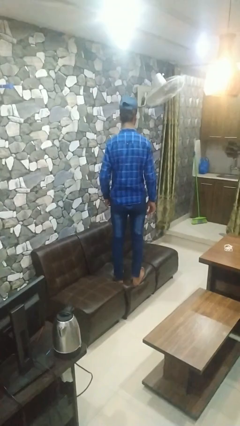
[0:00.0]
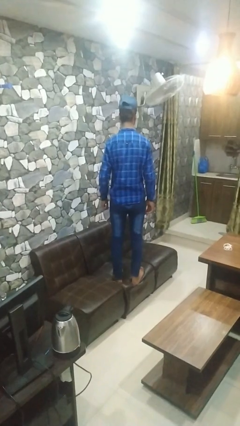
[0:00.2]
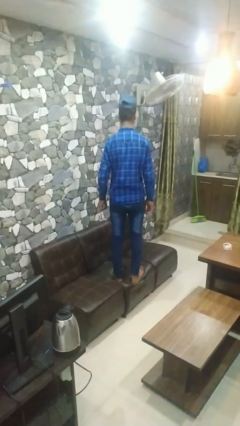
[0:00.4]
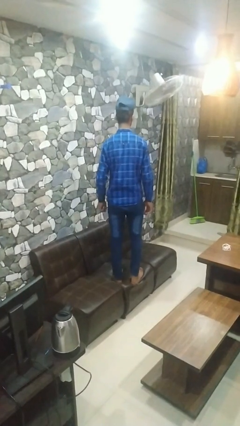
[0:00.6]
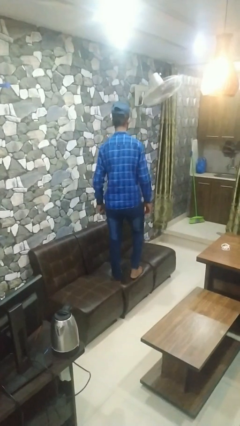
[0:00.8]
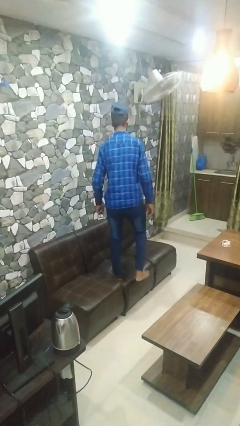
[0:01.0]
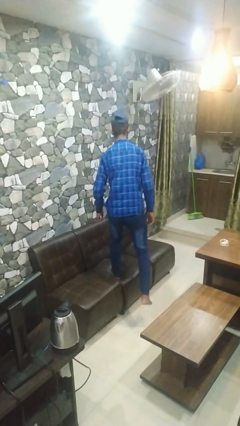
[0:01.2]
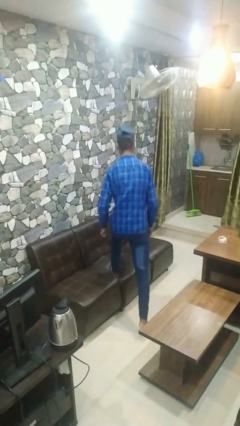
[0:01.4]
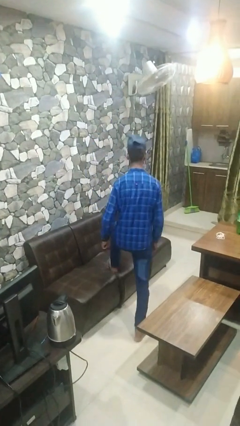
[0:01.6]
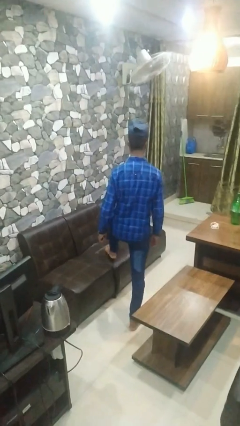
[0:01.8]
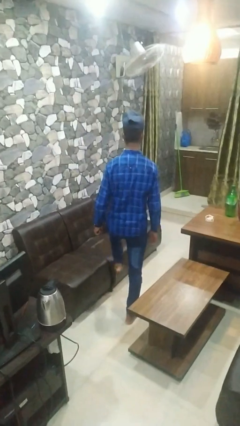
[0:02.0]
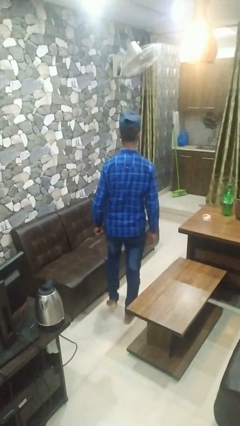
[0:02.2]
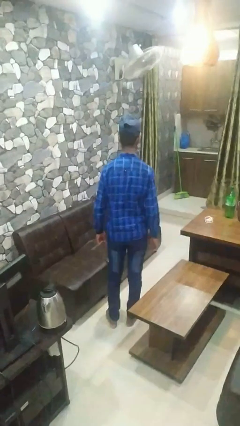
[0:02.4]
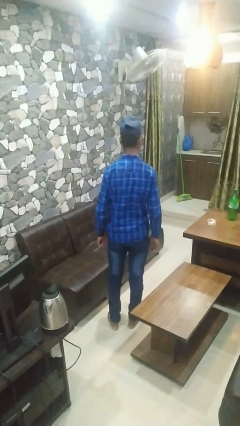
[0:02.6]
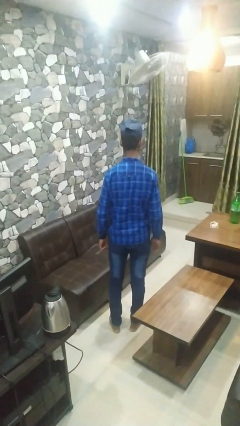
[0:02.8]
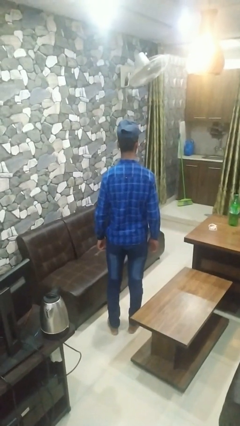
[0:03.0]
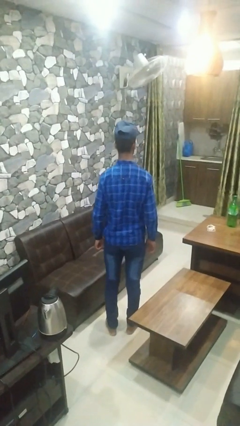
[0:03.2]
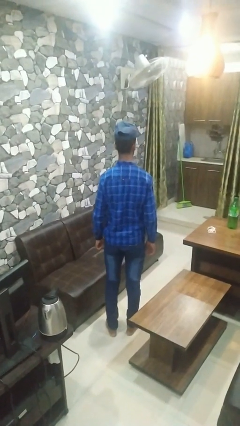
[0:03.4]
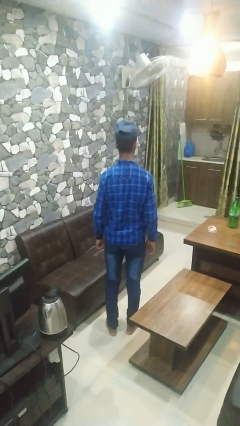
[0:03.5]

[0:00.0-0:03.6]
person climbs off couch

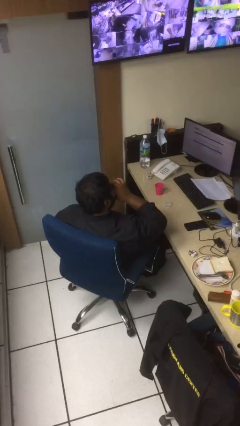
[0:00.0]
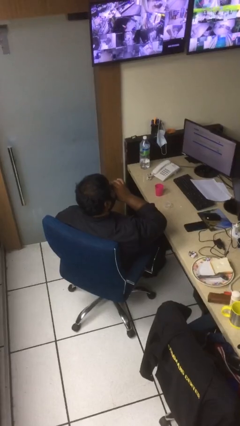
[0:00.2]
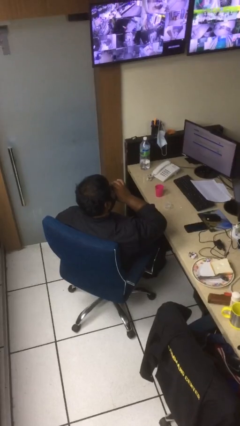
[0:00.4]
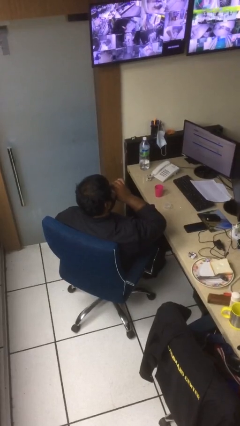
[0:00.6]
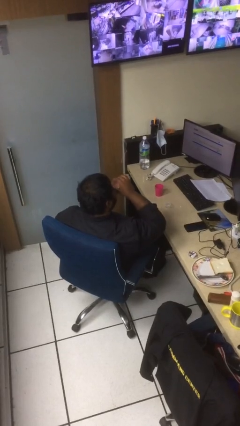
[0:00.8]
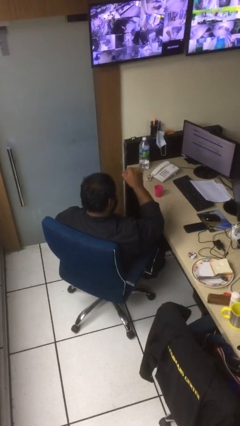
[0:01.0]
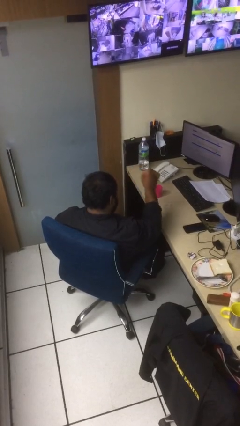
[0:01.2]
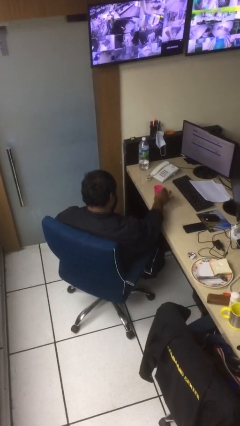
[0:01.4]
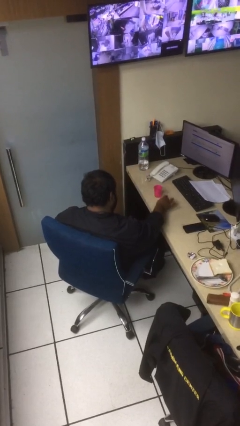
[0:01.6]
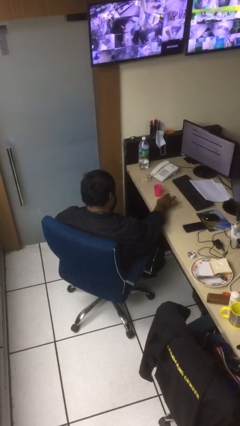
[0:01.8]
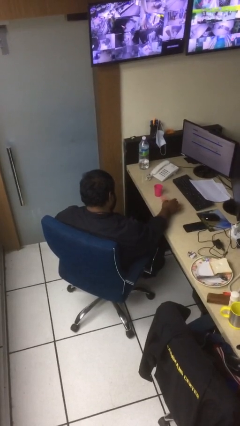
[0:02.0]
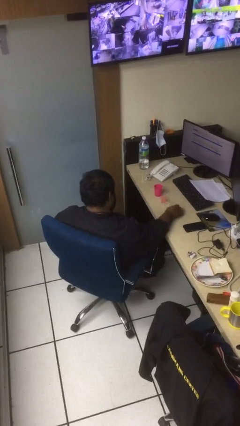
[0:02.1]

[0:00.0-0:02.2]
person puts down object on table

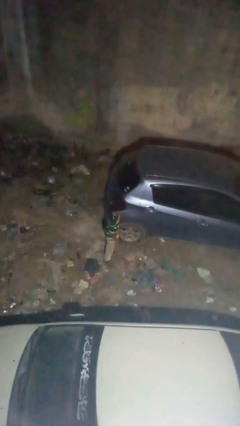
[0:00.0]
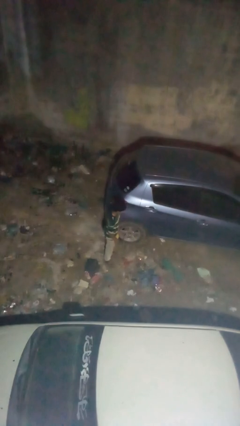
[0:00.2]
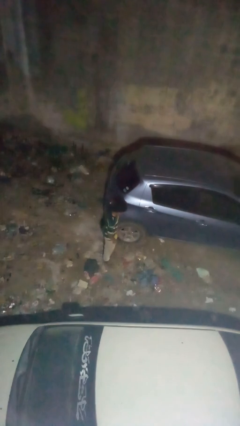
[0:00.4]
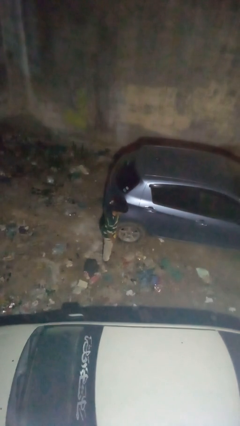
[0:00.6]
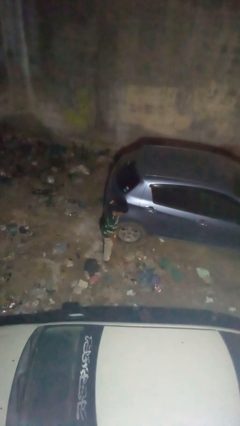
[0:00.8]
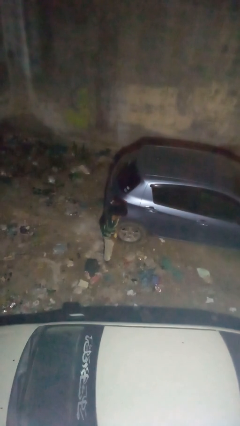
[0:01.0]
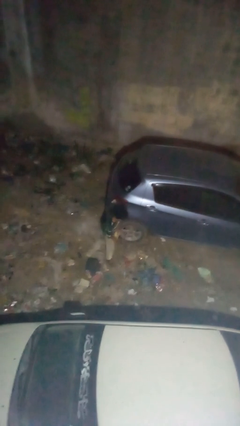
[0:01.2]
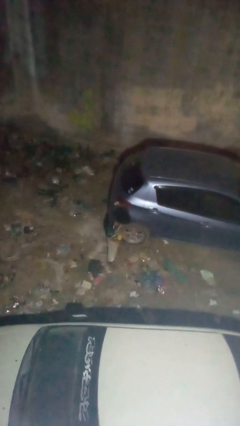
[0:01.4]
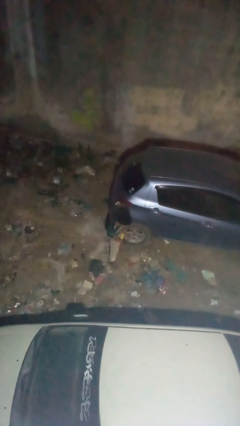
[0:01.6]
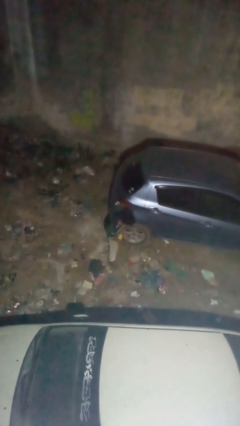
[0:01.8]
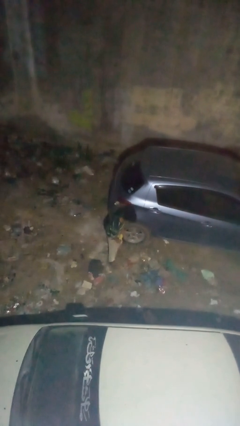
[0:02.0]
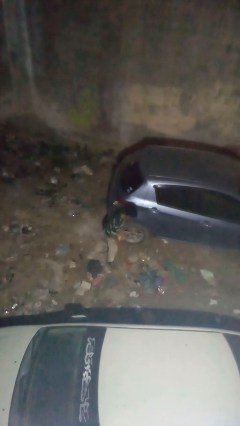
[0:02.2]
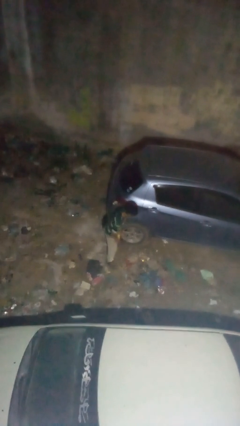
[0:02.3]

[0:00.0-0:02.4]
person kicks car tires

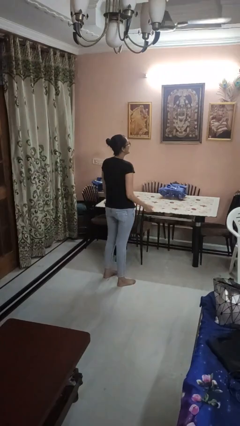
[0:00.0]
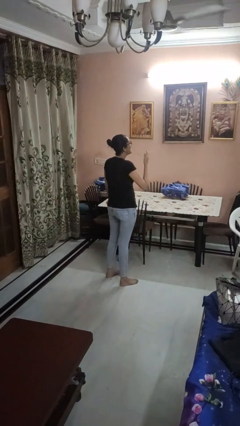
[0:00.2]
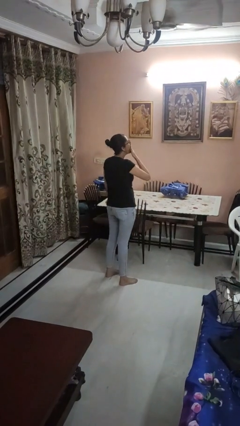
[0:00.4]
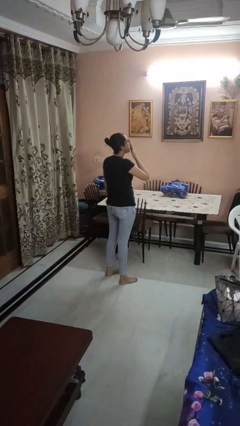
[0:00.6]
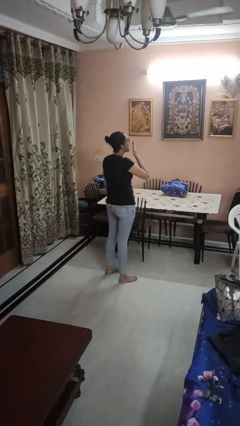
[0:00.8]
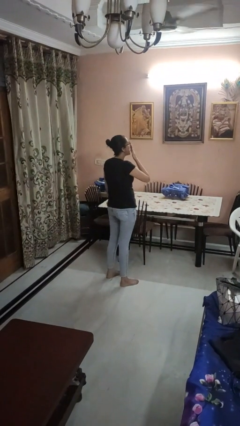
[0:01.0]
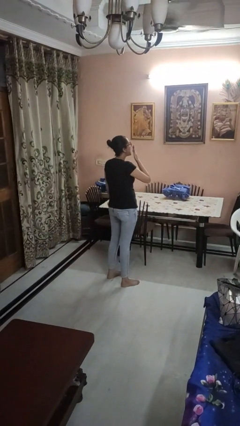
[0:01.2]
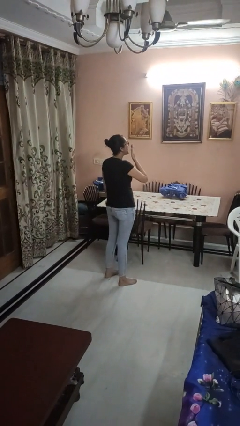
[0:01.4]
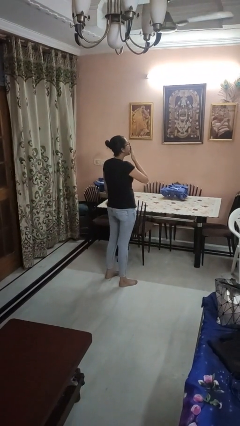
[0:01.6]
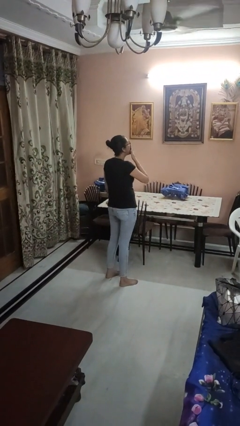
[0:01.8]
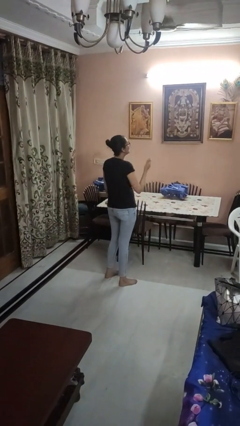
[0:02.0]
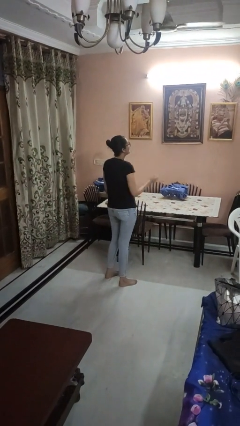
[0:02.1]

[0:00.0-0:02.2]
person yawns

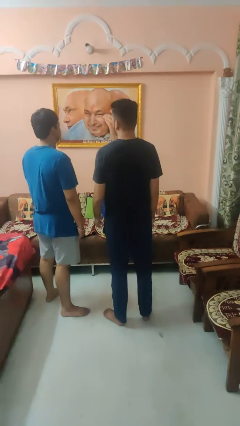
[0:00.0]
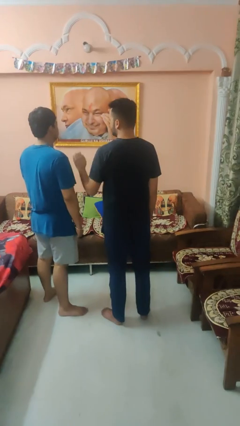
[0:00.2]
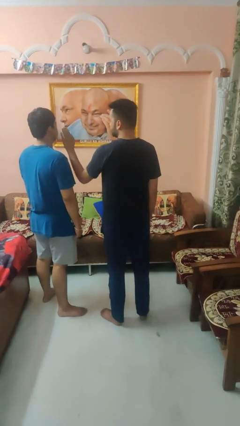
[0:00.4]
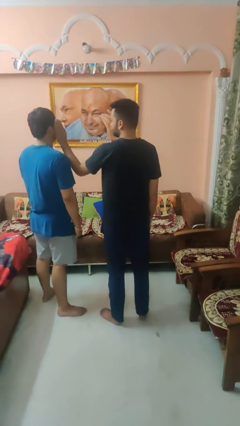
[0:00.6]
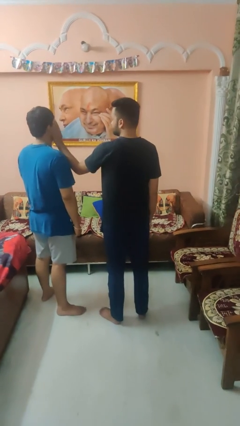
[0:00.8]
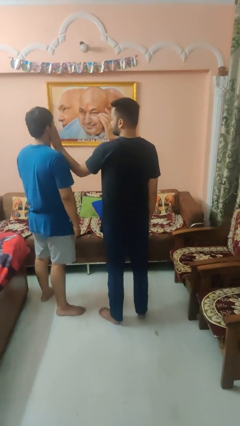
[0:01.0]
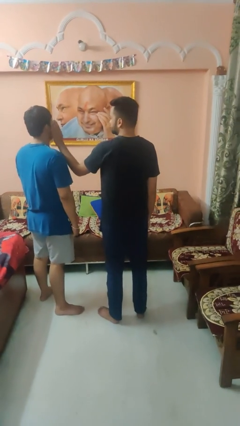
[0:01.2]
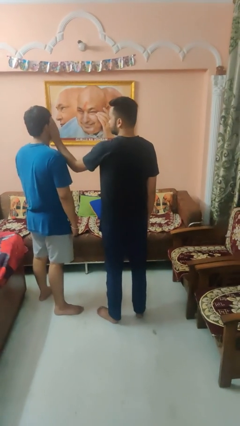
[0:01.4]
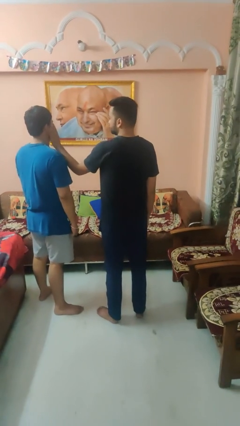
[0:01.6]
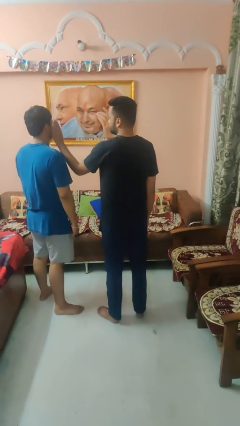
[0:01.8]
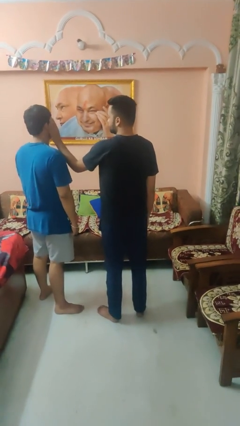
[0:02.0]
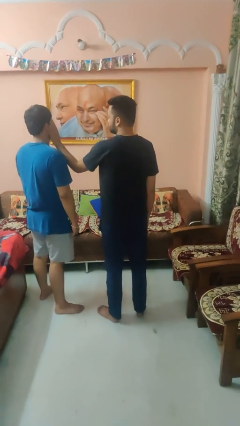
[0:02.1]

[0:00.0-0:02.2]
person touches face of person

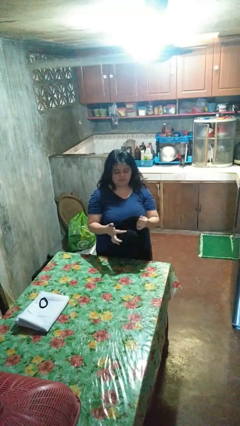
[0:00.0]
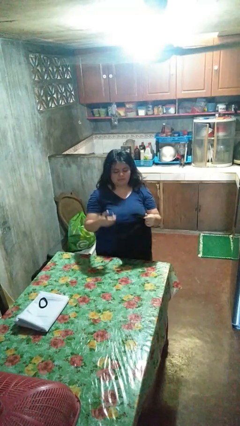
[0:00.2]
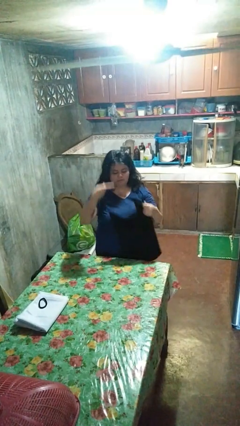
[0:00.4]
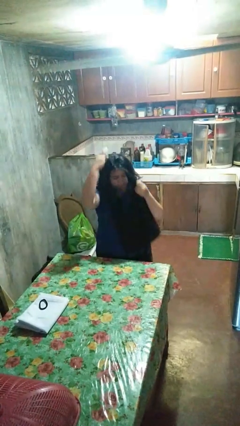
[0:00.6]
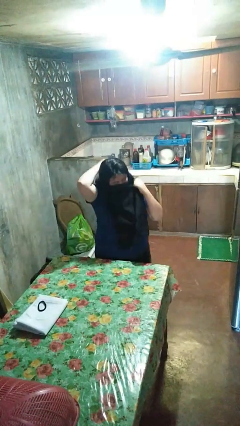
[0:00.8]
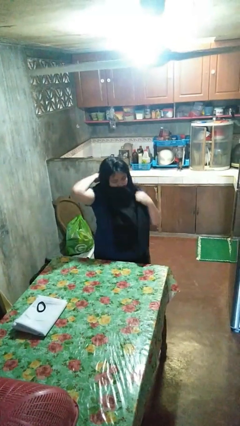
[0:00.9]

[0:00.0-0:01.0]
person puts on apron

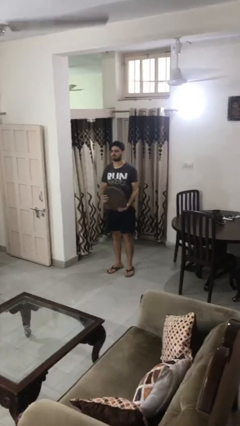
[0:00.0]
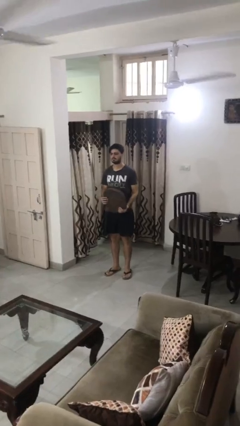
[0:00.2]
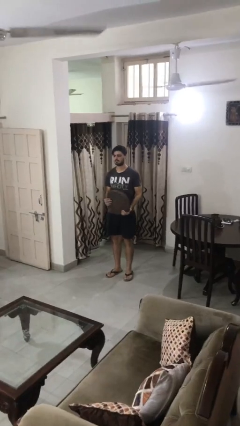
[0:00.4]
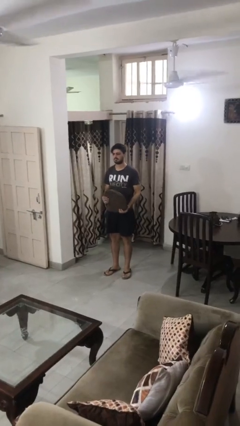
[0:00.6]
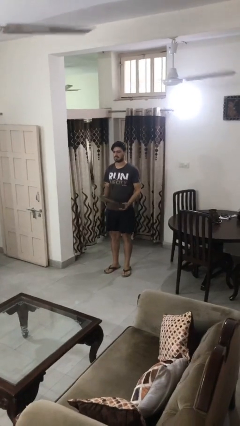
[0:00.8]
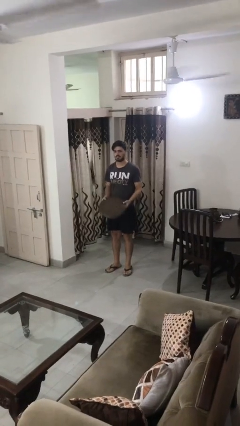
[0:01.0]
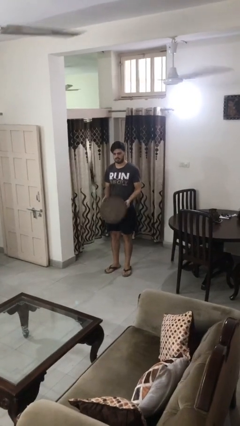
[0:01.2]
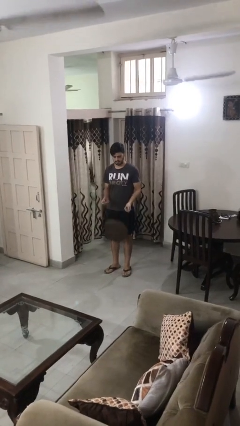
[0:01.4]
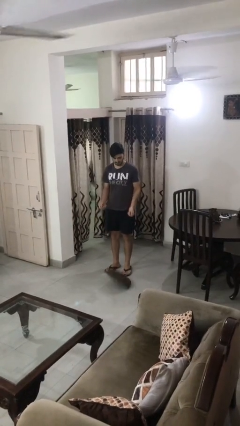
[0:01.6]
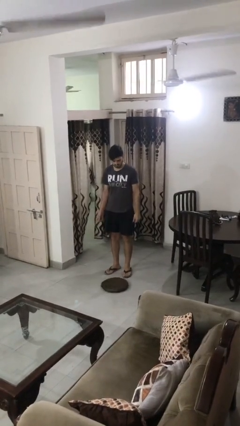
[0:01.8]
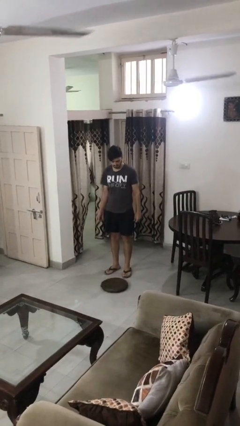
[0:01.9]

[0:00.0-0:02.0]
person drops object

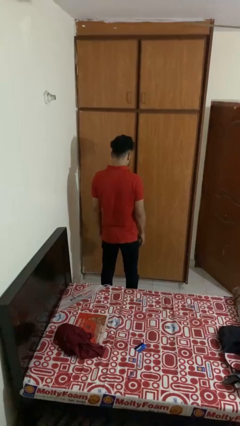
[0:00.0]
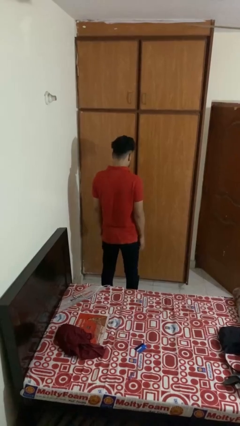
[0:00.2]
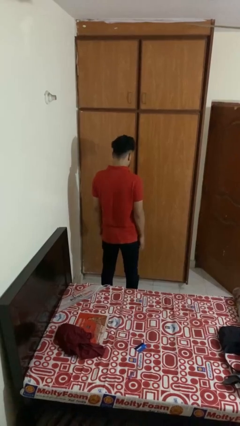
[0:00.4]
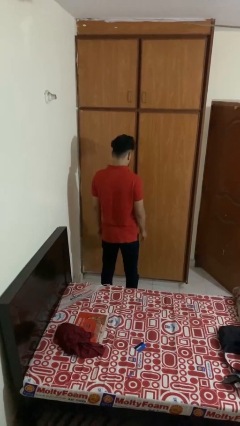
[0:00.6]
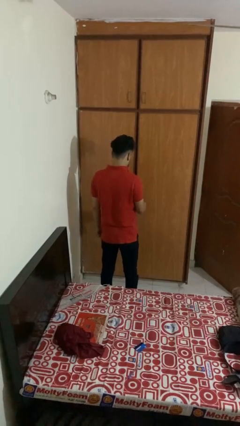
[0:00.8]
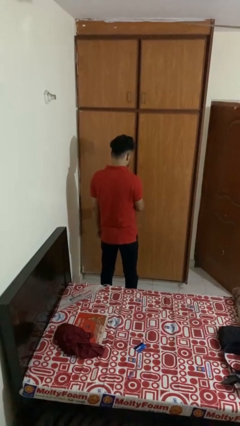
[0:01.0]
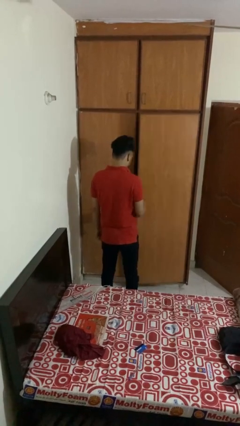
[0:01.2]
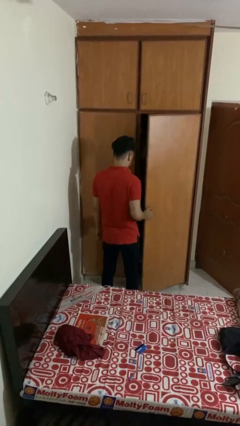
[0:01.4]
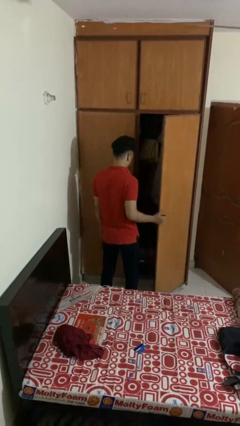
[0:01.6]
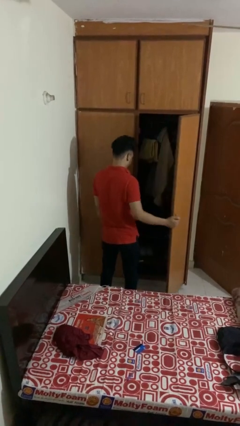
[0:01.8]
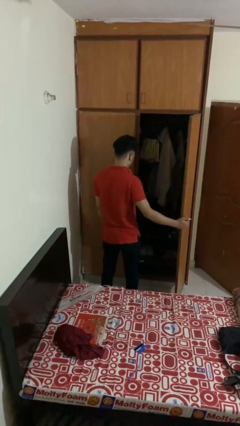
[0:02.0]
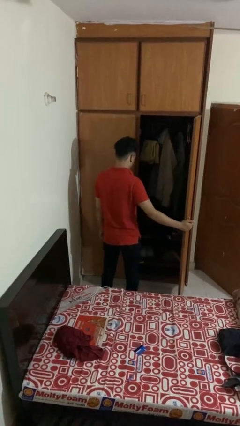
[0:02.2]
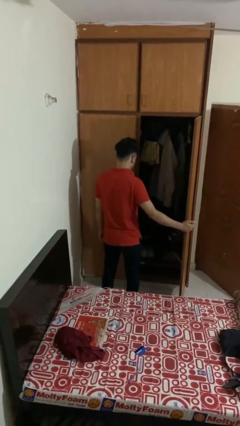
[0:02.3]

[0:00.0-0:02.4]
person opens closet door
